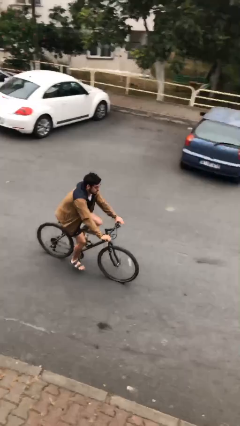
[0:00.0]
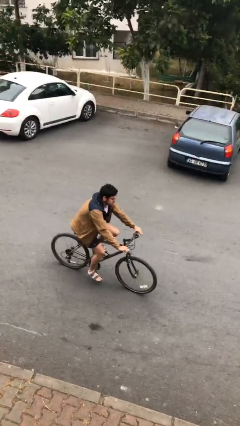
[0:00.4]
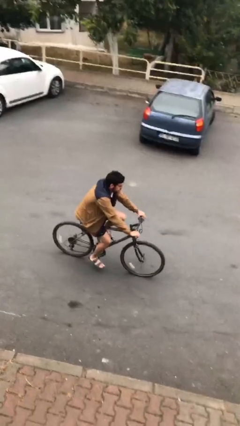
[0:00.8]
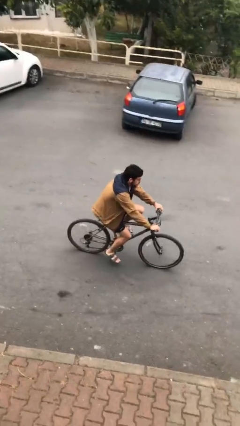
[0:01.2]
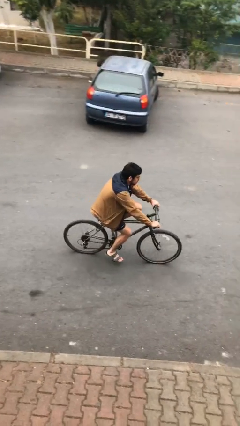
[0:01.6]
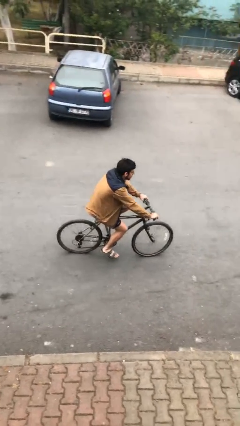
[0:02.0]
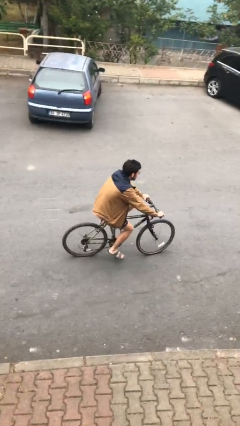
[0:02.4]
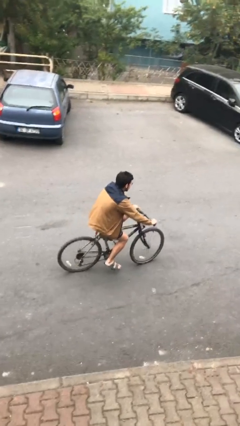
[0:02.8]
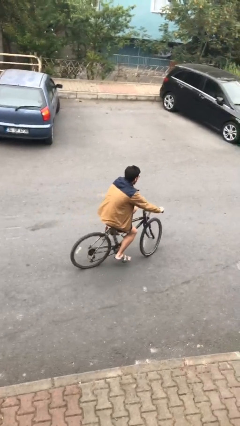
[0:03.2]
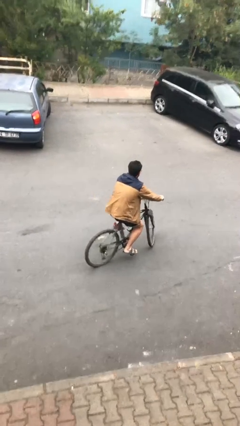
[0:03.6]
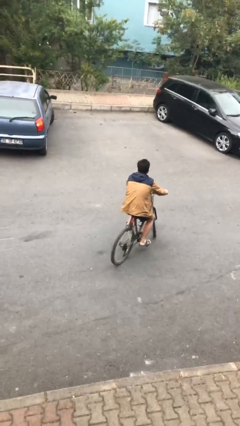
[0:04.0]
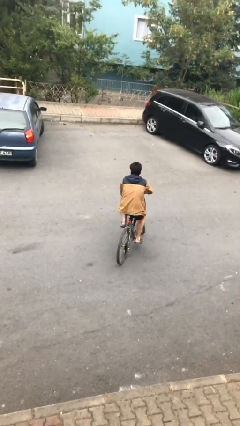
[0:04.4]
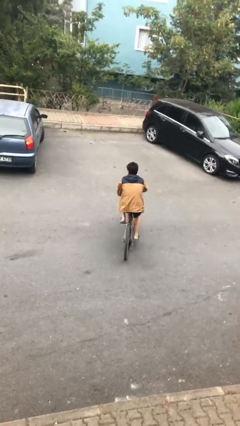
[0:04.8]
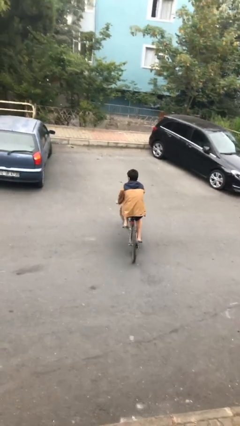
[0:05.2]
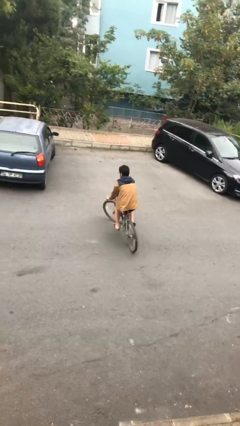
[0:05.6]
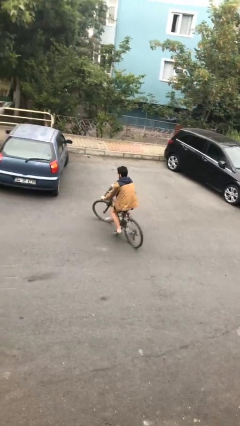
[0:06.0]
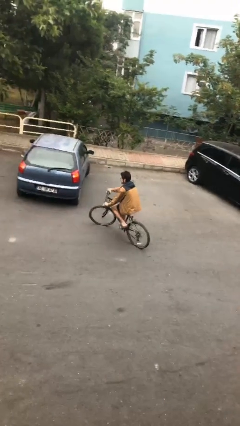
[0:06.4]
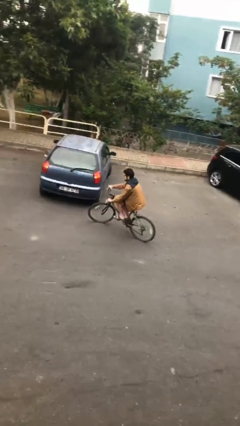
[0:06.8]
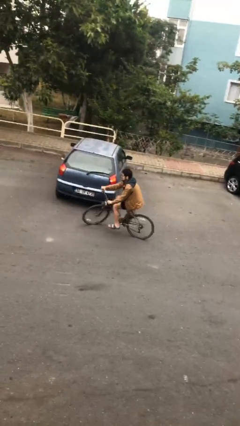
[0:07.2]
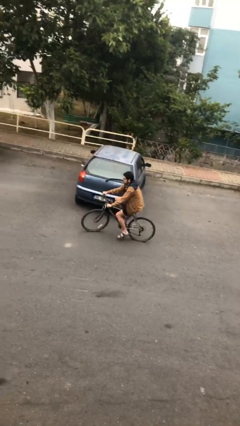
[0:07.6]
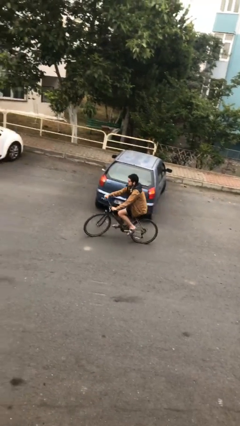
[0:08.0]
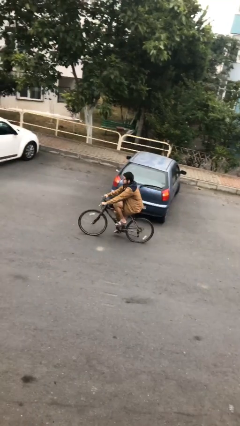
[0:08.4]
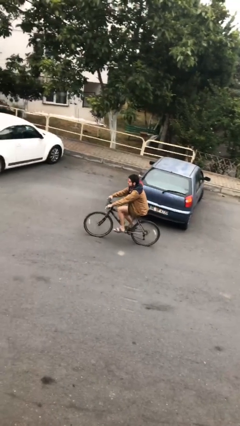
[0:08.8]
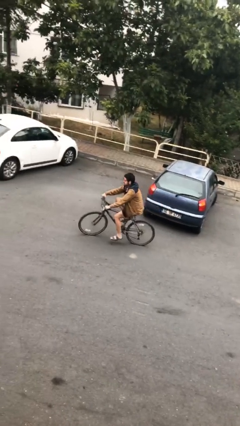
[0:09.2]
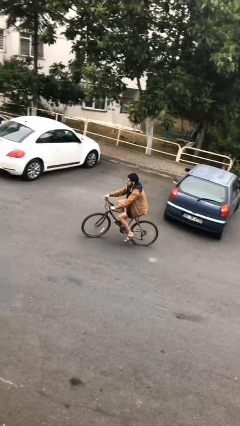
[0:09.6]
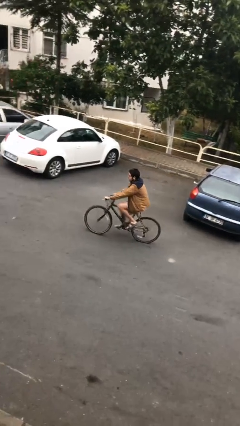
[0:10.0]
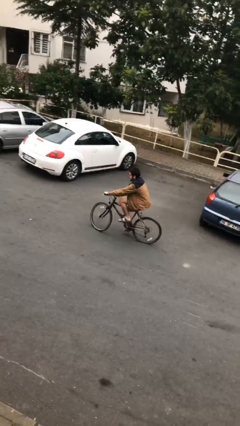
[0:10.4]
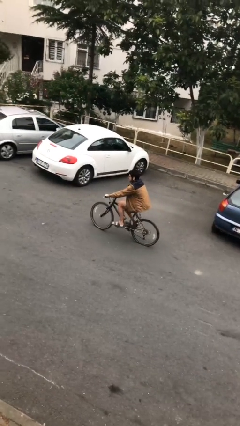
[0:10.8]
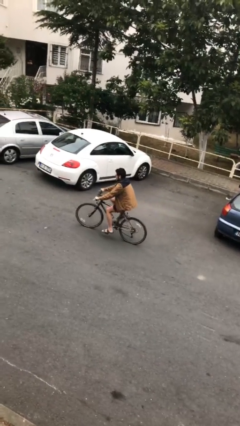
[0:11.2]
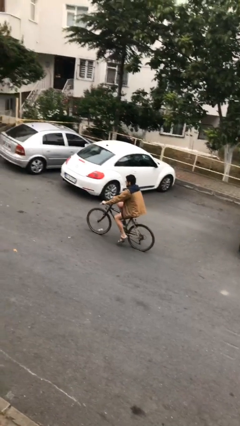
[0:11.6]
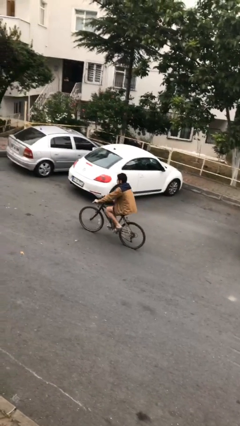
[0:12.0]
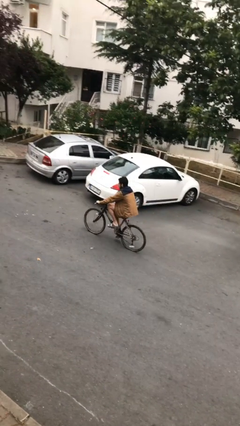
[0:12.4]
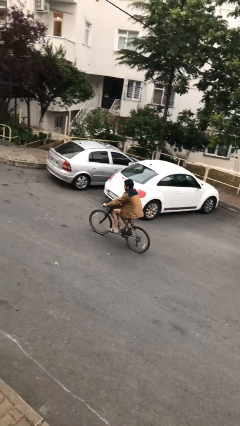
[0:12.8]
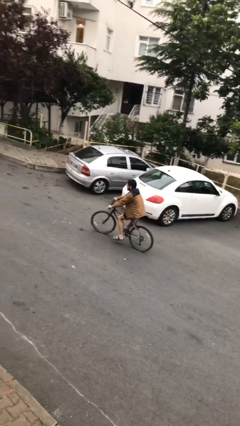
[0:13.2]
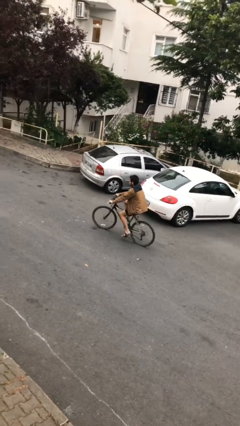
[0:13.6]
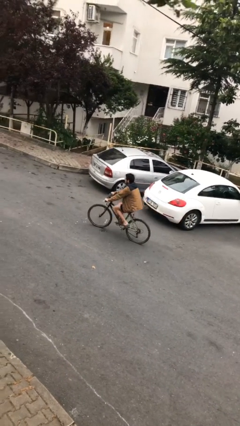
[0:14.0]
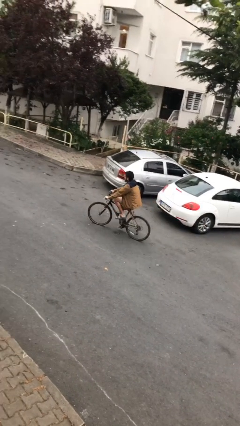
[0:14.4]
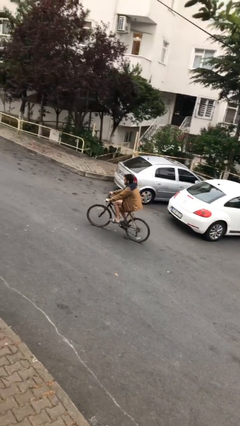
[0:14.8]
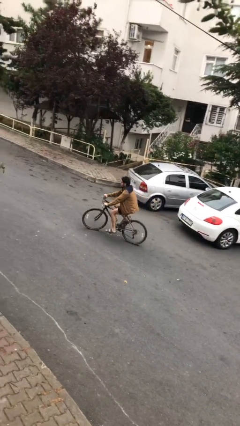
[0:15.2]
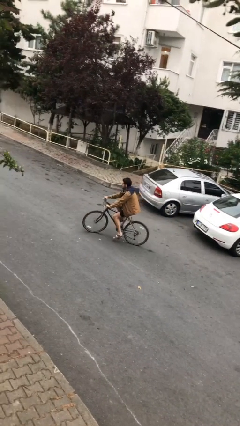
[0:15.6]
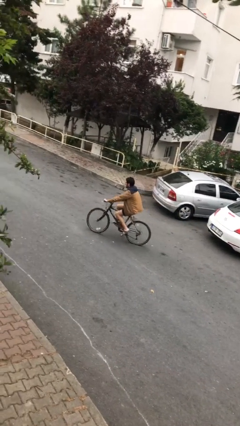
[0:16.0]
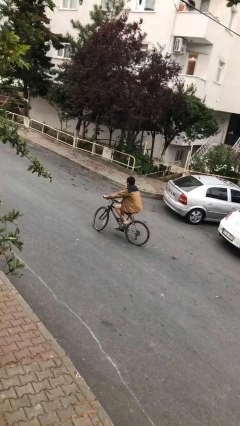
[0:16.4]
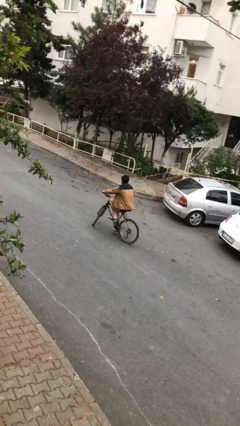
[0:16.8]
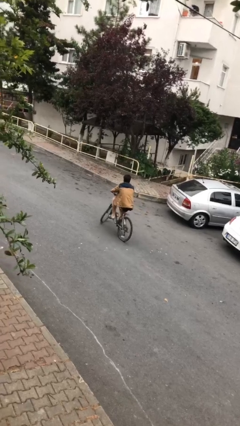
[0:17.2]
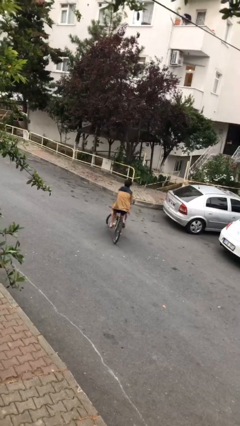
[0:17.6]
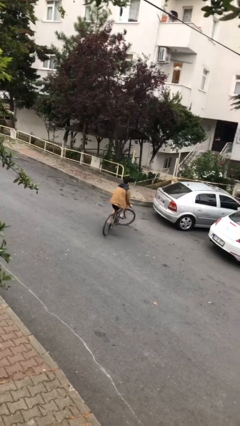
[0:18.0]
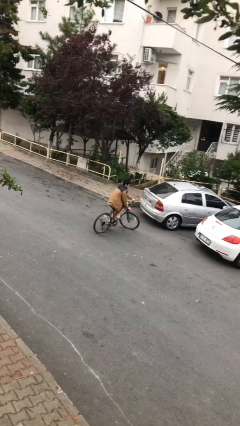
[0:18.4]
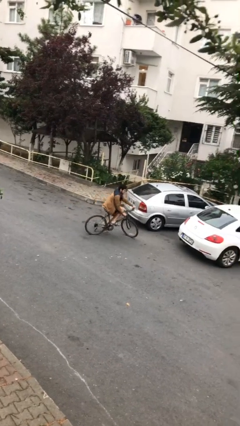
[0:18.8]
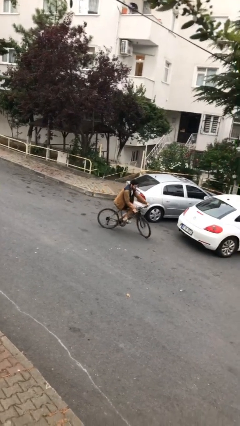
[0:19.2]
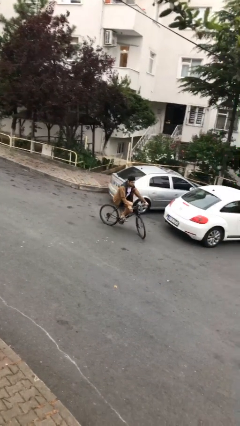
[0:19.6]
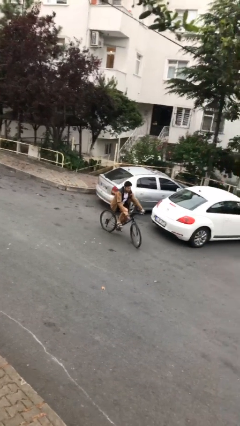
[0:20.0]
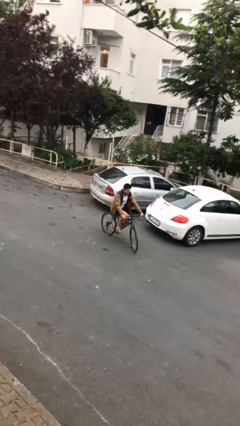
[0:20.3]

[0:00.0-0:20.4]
person rides bicycle

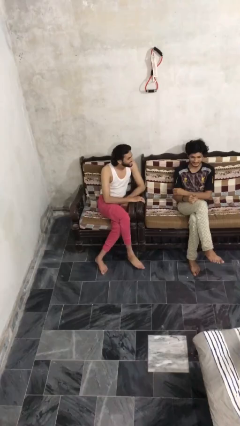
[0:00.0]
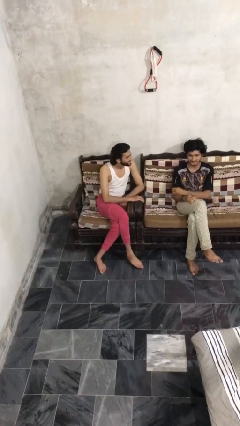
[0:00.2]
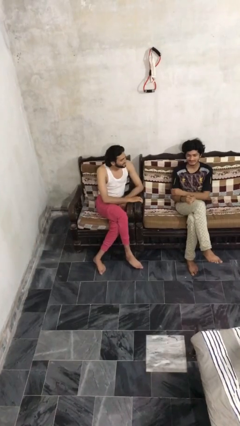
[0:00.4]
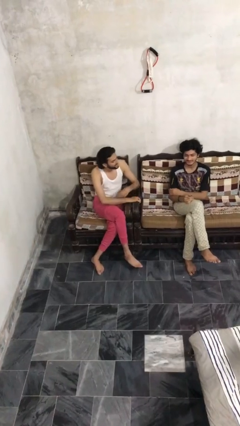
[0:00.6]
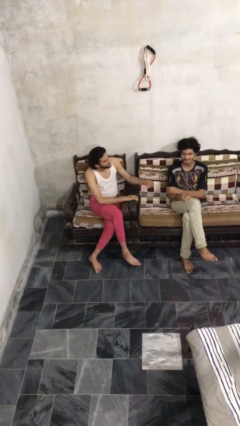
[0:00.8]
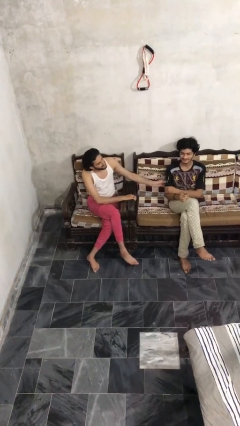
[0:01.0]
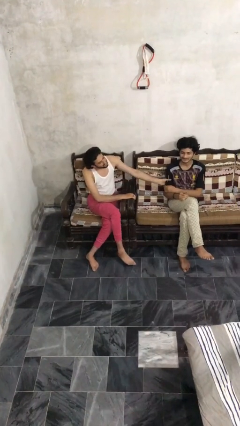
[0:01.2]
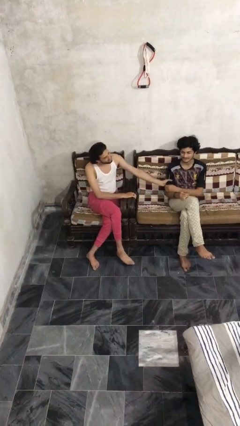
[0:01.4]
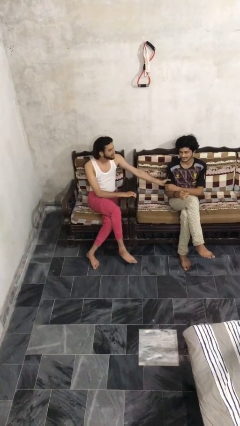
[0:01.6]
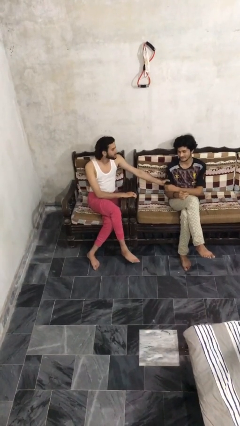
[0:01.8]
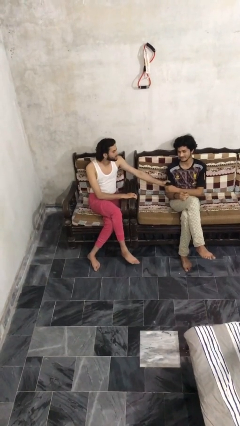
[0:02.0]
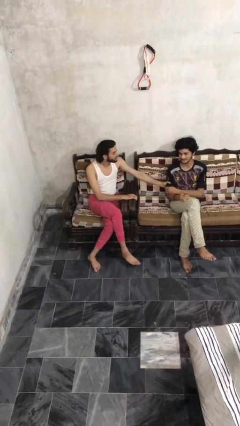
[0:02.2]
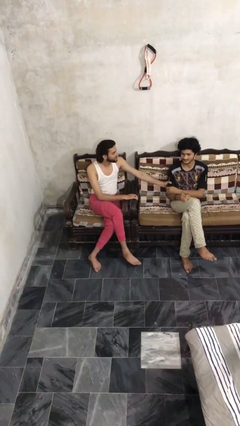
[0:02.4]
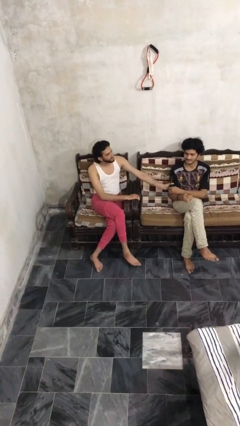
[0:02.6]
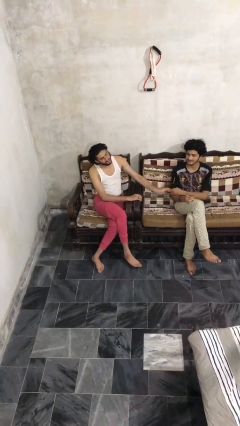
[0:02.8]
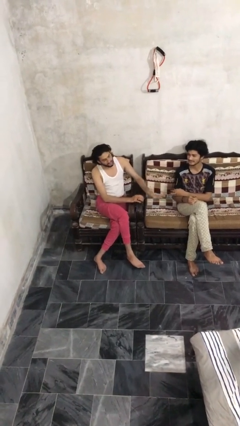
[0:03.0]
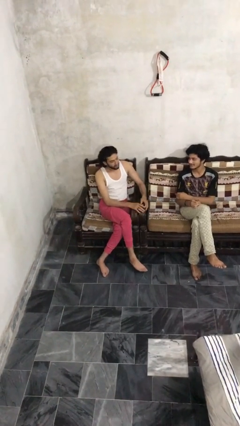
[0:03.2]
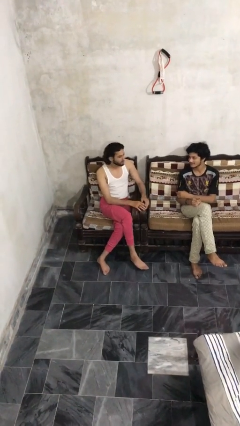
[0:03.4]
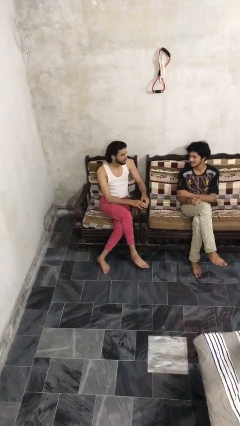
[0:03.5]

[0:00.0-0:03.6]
person grabs person by bicep

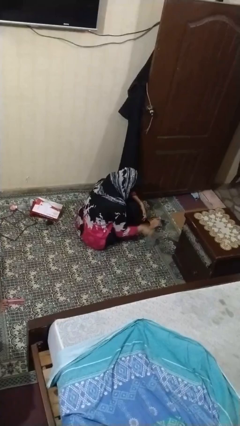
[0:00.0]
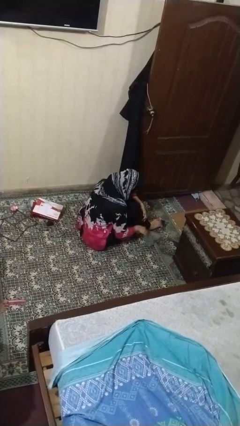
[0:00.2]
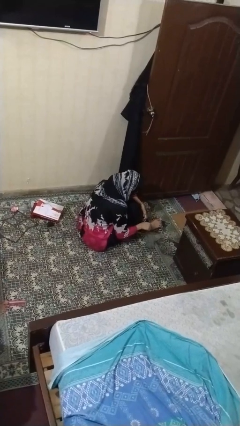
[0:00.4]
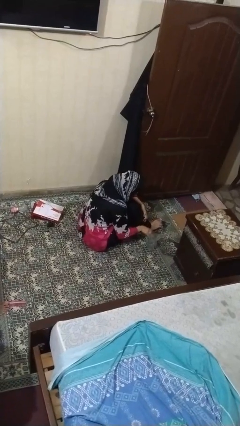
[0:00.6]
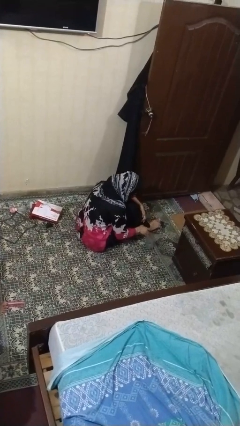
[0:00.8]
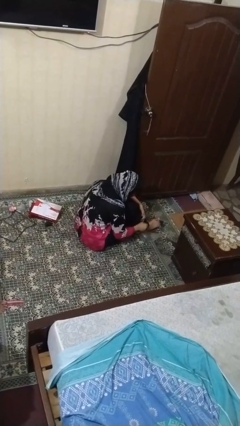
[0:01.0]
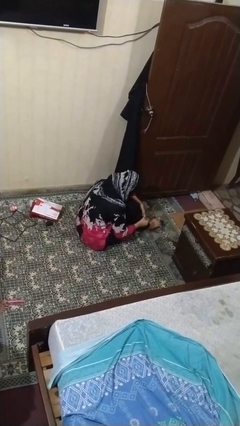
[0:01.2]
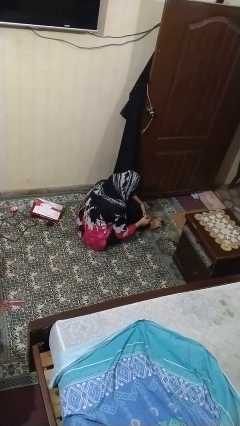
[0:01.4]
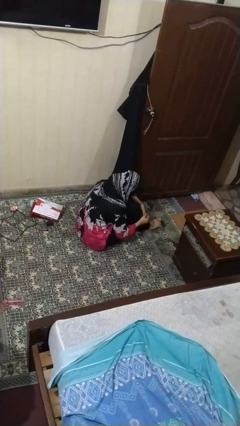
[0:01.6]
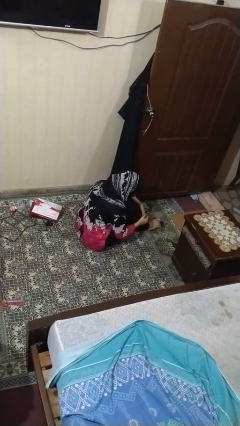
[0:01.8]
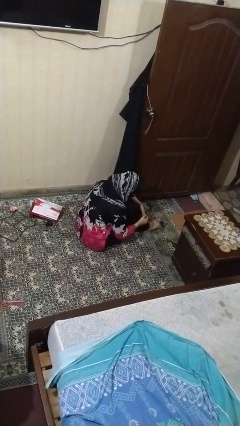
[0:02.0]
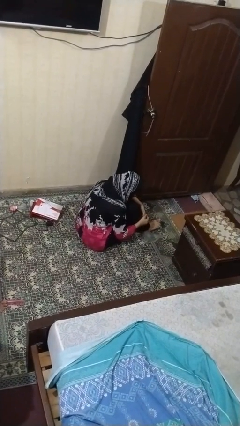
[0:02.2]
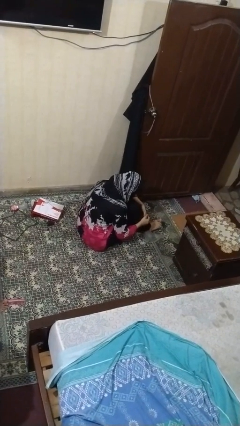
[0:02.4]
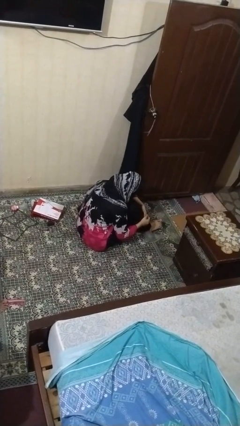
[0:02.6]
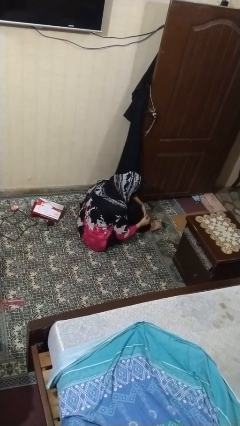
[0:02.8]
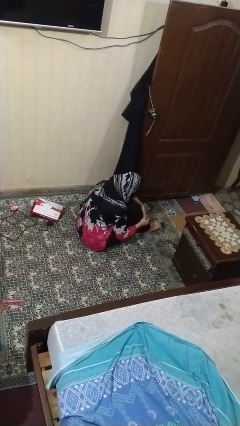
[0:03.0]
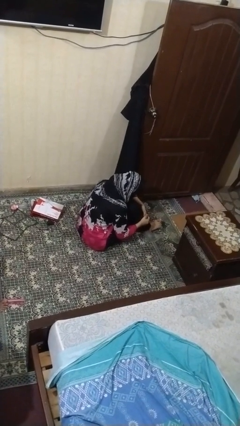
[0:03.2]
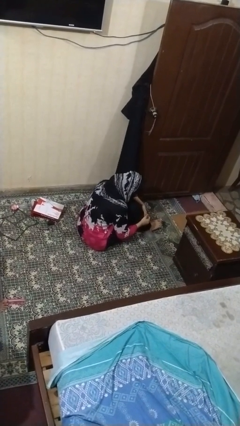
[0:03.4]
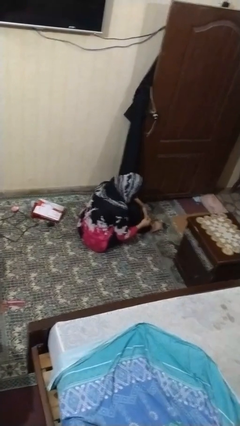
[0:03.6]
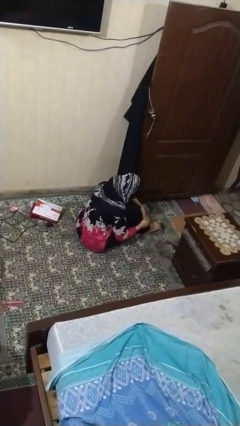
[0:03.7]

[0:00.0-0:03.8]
person spills on floor

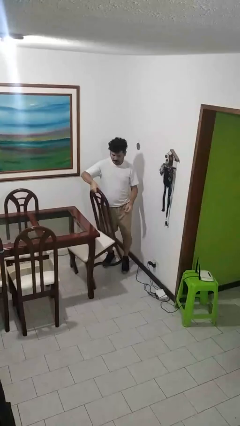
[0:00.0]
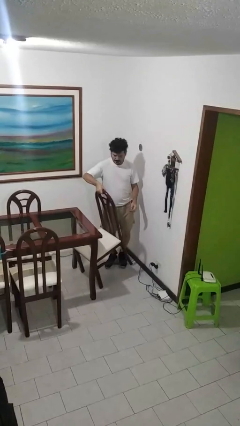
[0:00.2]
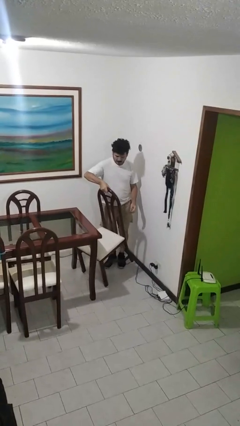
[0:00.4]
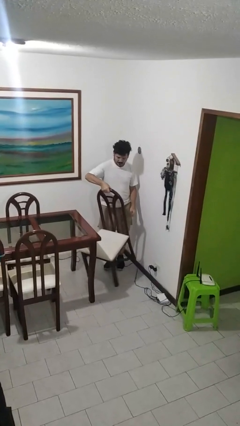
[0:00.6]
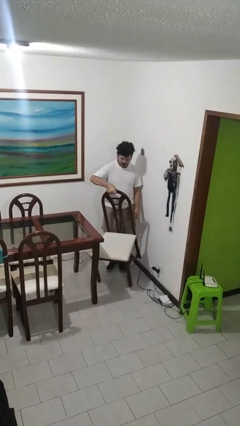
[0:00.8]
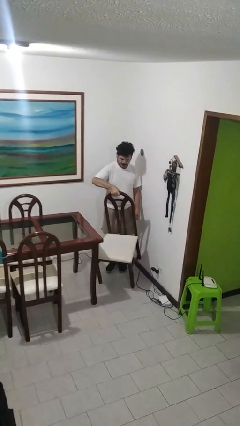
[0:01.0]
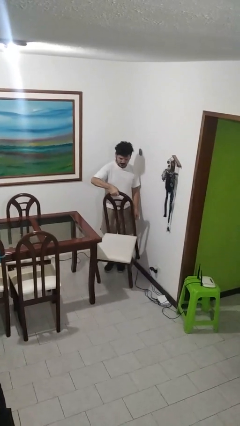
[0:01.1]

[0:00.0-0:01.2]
person pulls out chair
